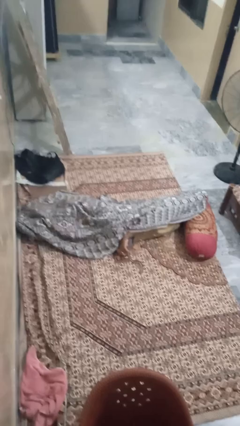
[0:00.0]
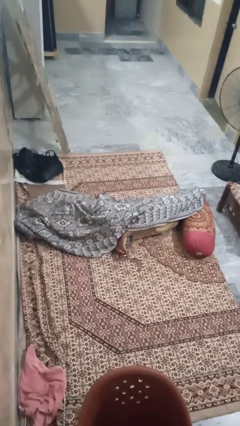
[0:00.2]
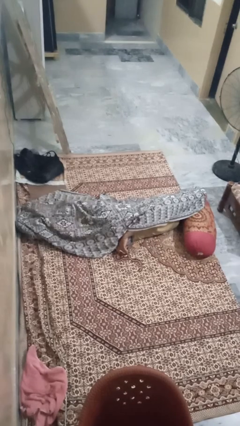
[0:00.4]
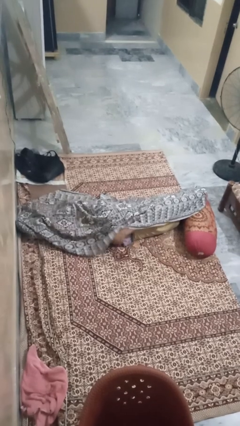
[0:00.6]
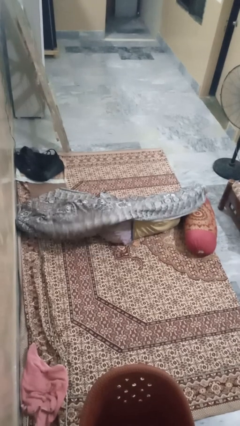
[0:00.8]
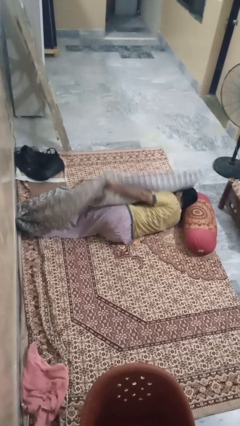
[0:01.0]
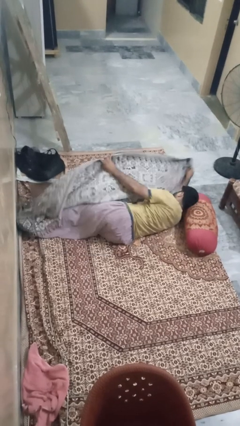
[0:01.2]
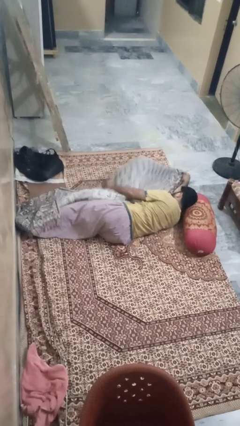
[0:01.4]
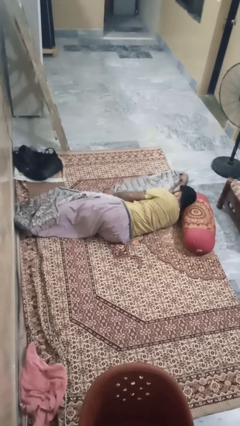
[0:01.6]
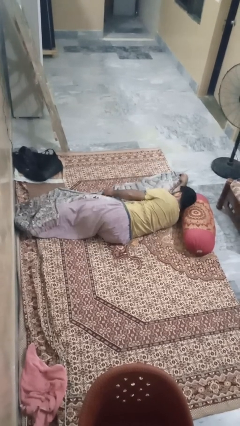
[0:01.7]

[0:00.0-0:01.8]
person uncovers with blanket

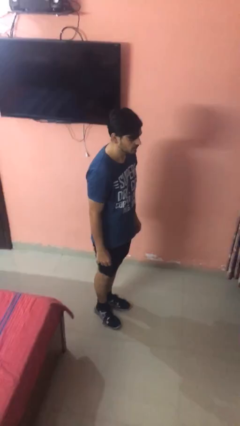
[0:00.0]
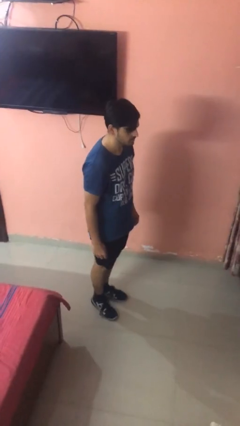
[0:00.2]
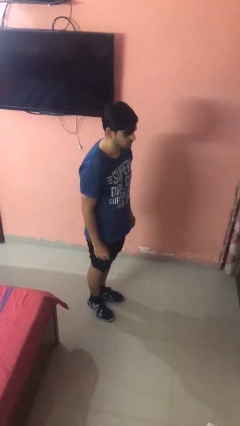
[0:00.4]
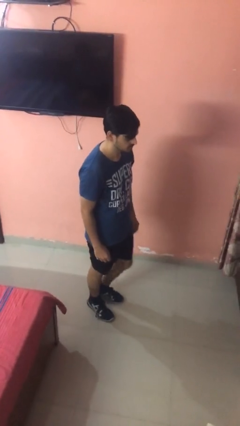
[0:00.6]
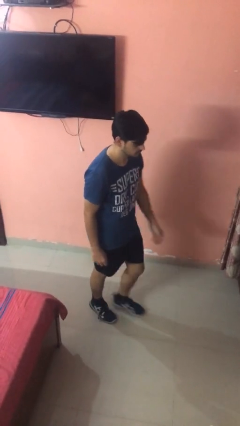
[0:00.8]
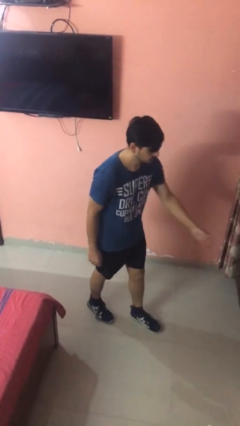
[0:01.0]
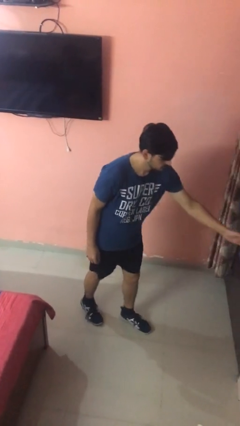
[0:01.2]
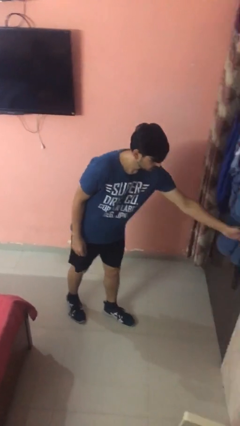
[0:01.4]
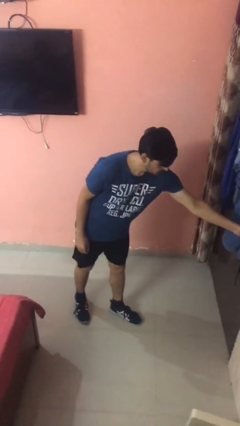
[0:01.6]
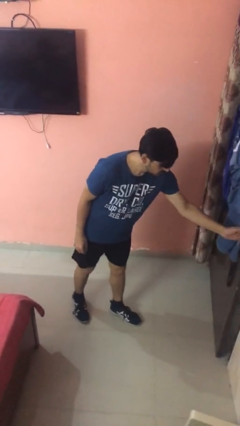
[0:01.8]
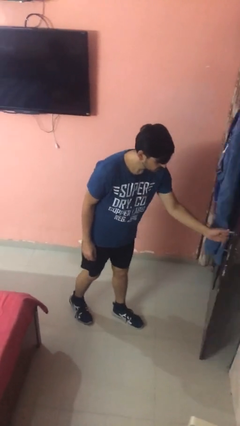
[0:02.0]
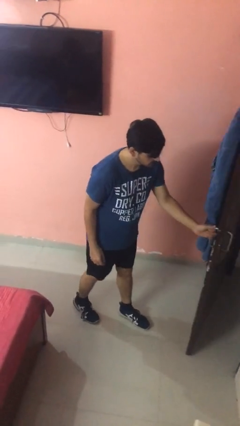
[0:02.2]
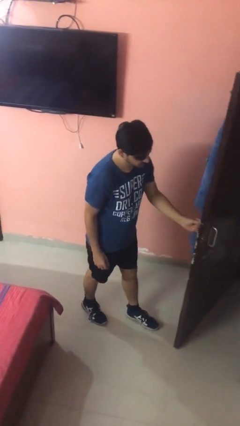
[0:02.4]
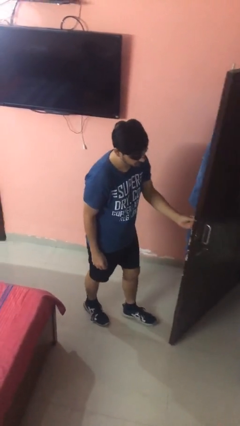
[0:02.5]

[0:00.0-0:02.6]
person opens facility door

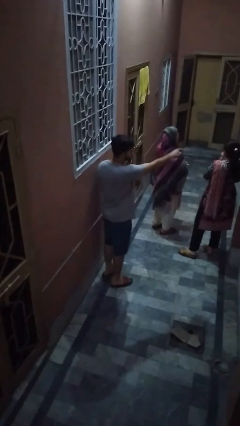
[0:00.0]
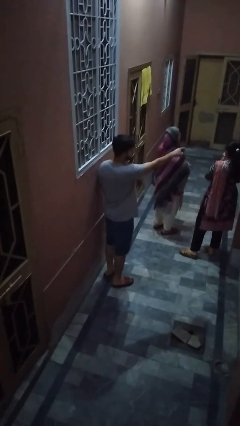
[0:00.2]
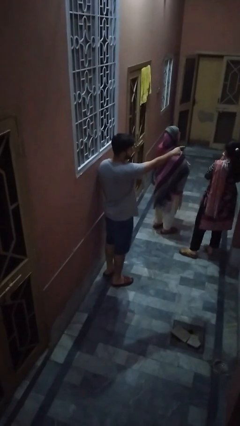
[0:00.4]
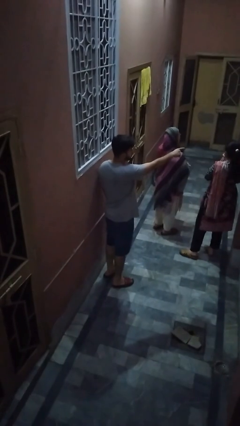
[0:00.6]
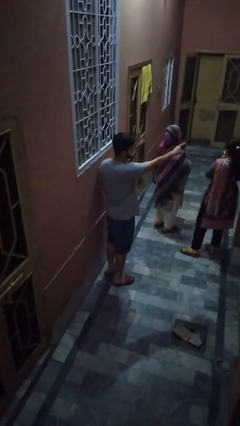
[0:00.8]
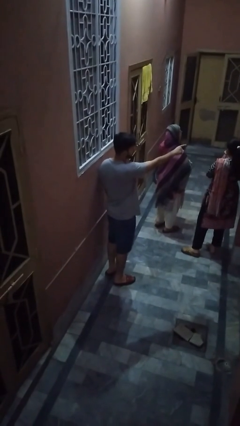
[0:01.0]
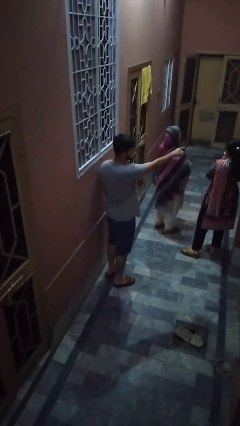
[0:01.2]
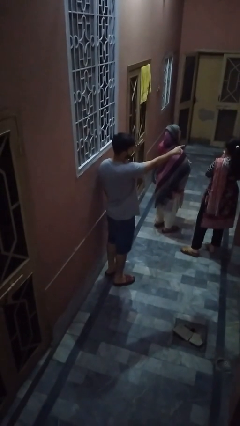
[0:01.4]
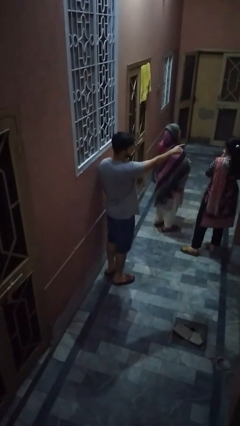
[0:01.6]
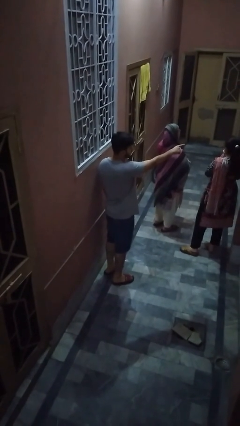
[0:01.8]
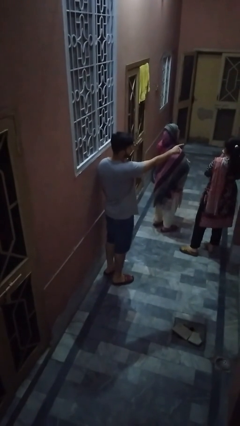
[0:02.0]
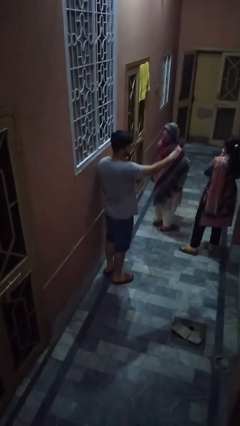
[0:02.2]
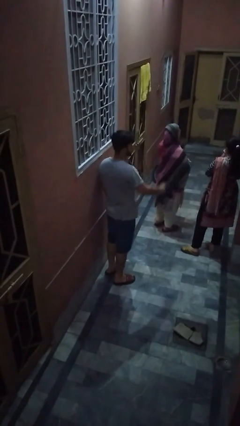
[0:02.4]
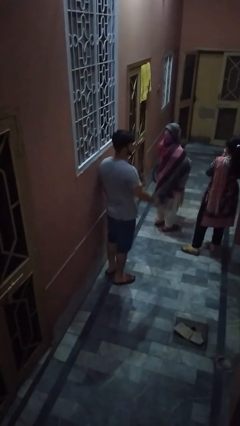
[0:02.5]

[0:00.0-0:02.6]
person points at person

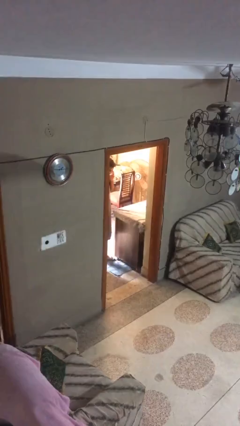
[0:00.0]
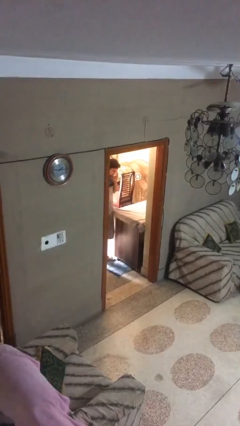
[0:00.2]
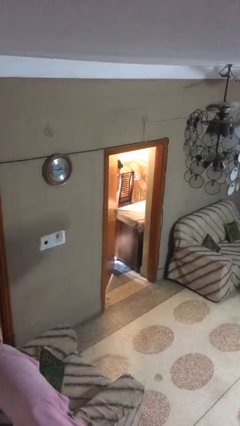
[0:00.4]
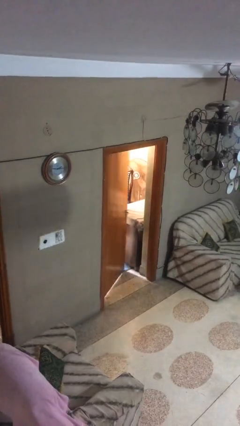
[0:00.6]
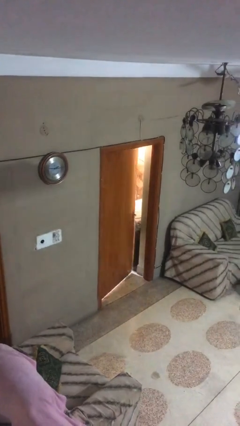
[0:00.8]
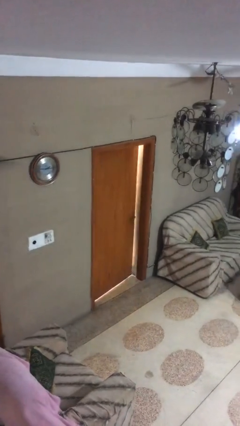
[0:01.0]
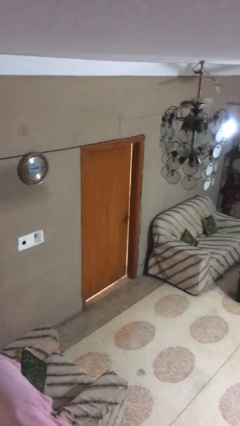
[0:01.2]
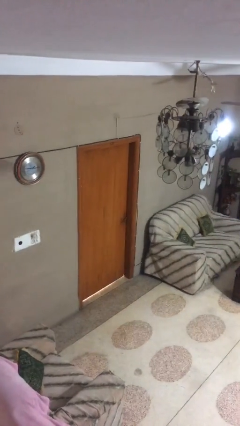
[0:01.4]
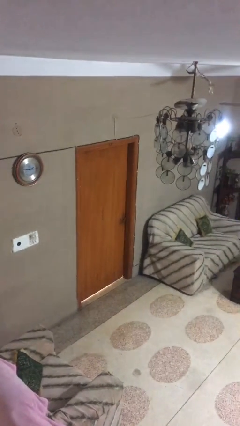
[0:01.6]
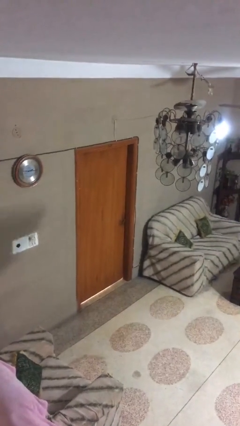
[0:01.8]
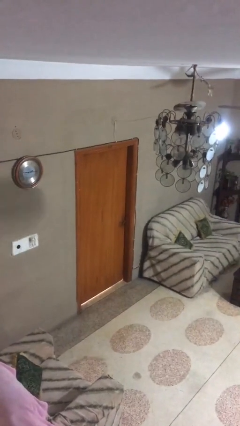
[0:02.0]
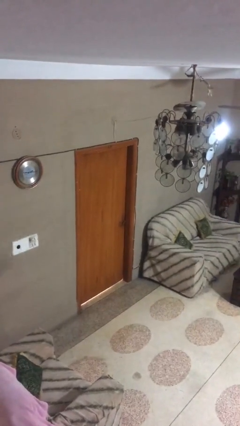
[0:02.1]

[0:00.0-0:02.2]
person closes facility door

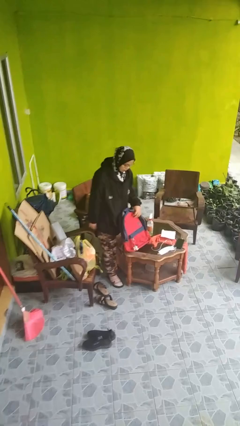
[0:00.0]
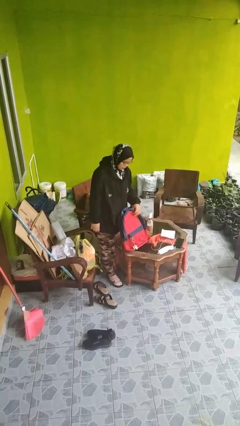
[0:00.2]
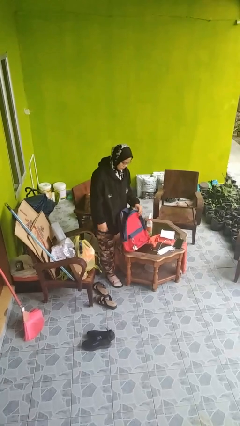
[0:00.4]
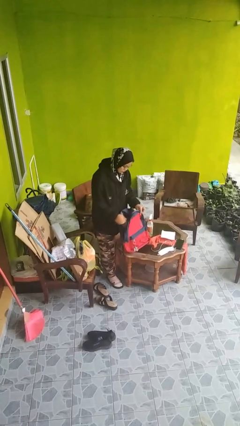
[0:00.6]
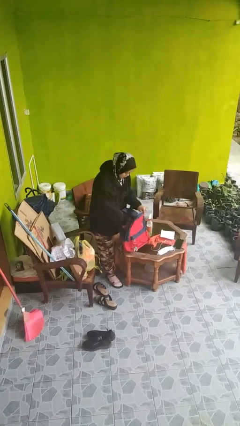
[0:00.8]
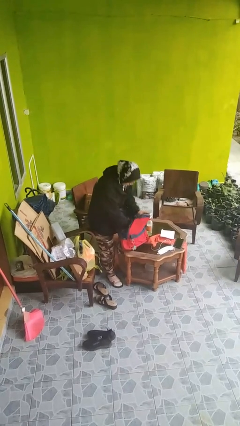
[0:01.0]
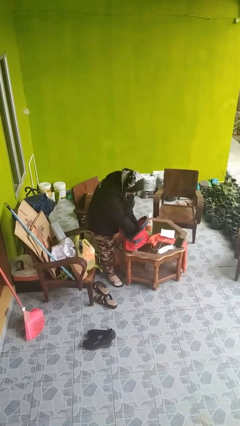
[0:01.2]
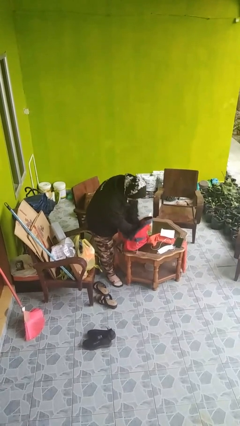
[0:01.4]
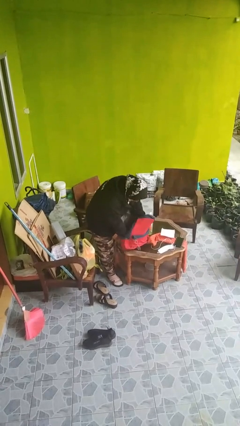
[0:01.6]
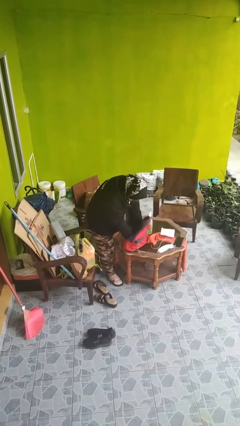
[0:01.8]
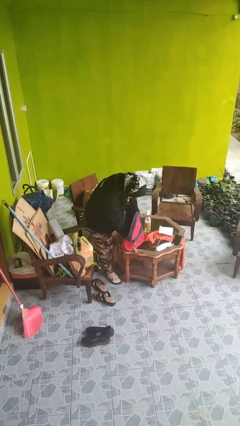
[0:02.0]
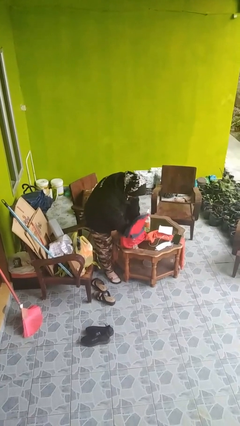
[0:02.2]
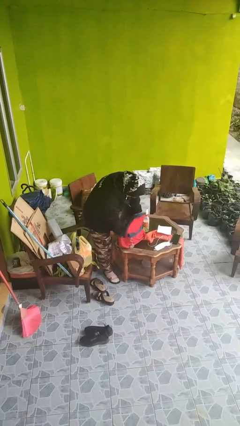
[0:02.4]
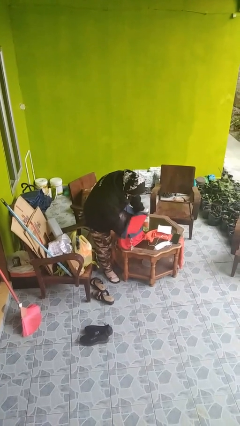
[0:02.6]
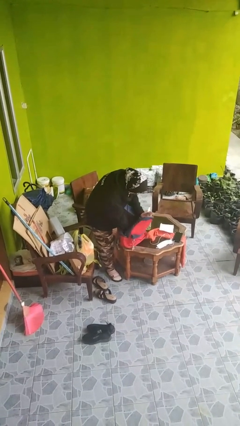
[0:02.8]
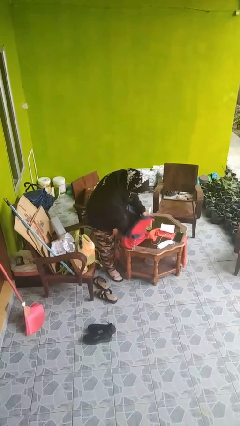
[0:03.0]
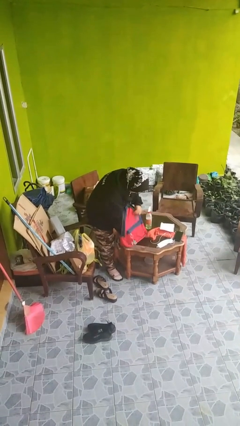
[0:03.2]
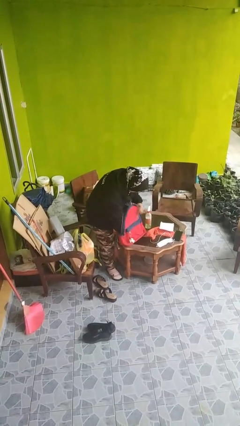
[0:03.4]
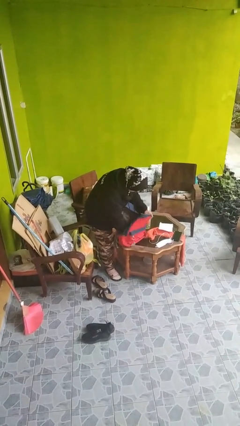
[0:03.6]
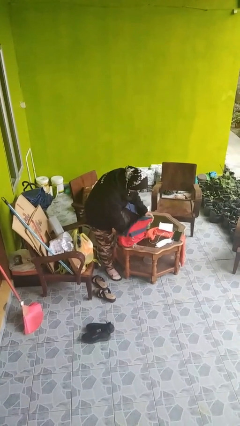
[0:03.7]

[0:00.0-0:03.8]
person searches in backpack

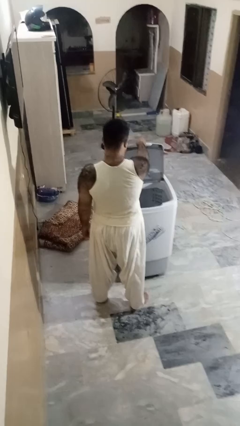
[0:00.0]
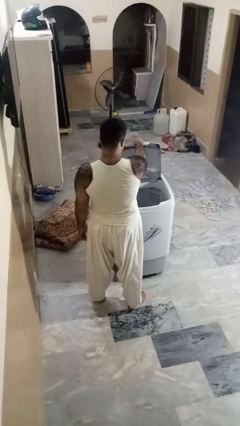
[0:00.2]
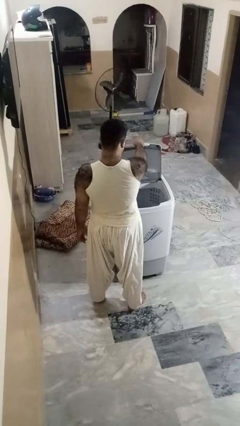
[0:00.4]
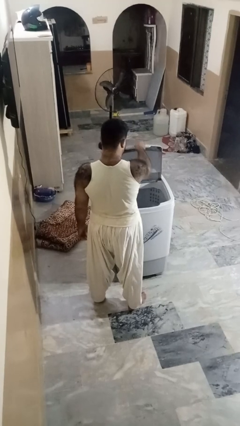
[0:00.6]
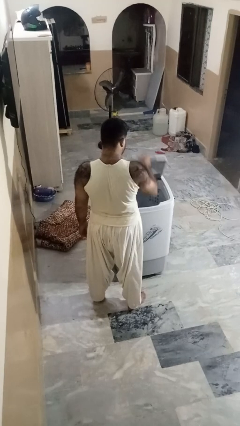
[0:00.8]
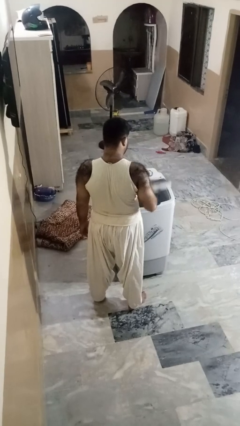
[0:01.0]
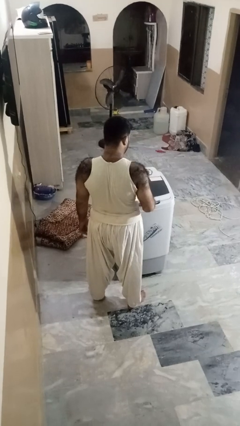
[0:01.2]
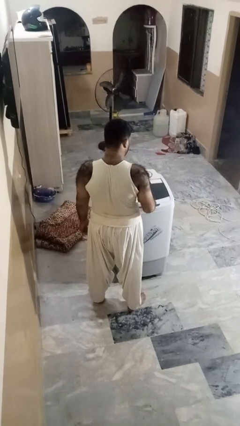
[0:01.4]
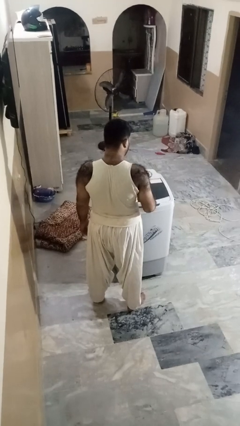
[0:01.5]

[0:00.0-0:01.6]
person closes clothes washer

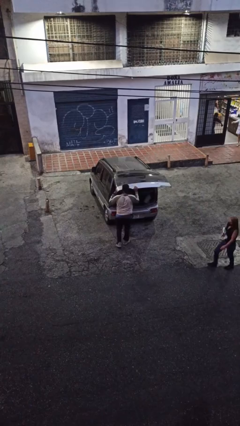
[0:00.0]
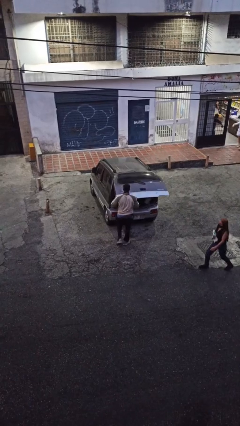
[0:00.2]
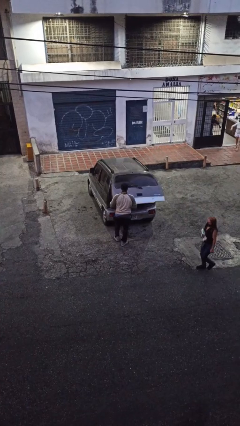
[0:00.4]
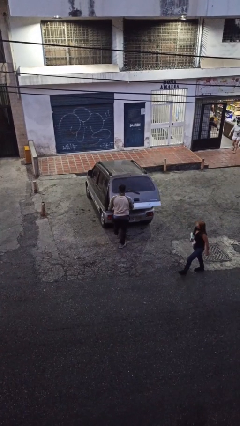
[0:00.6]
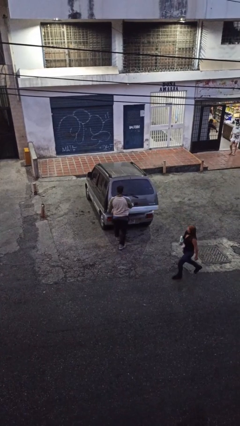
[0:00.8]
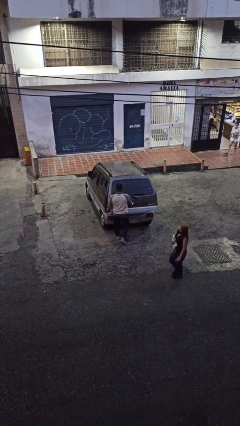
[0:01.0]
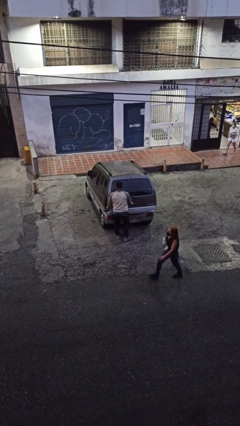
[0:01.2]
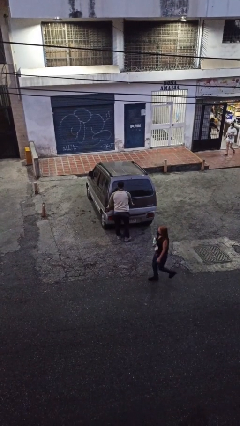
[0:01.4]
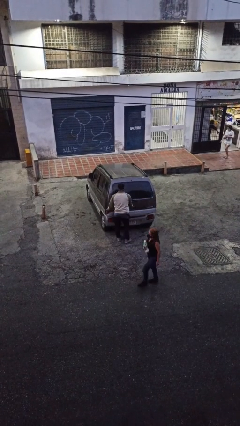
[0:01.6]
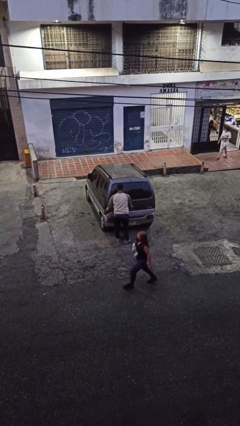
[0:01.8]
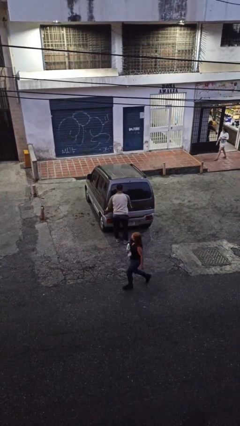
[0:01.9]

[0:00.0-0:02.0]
person closes car trunk
